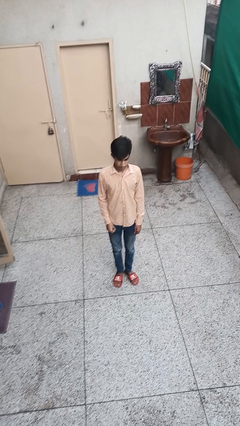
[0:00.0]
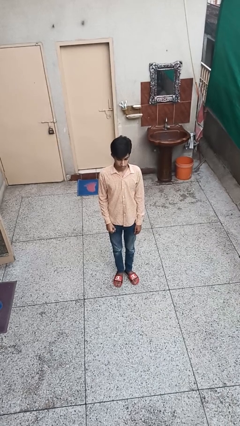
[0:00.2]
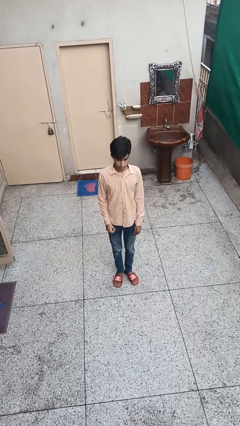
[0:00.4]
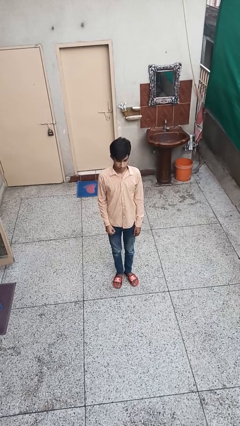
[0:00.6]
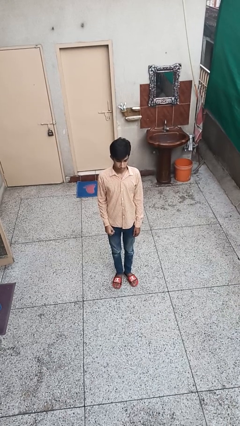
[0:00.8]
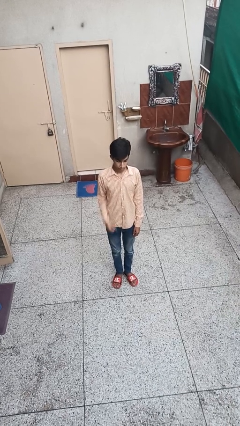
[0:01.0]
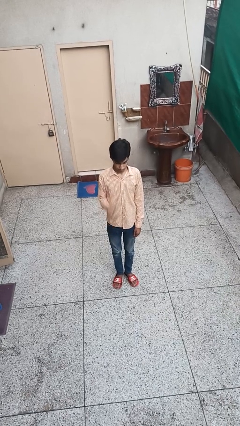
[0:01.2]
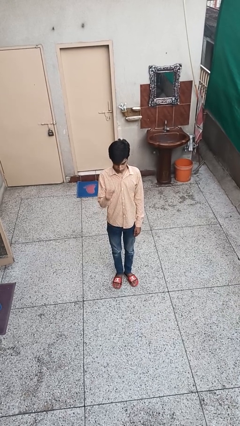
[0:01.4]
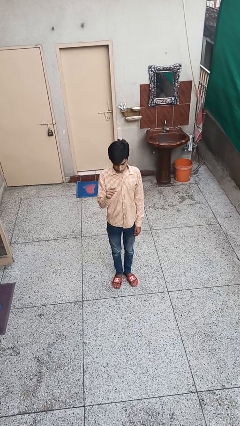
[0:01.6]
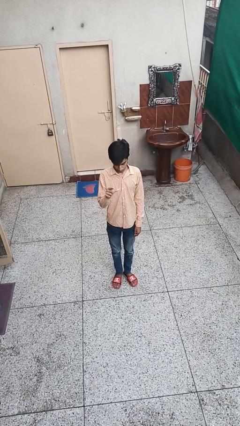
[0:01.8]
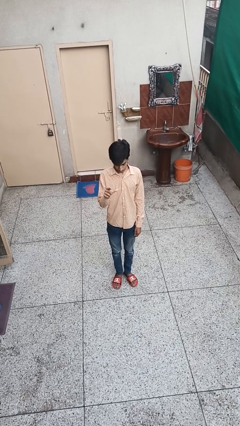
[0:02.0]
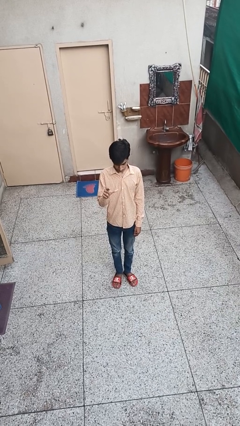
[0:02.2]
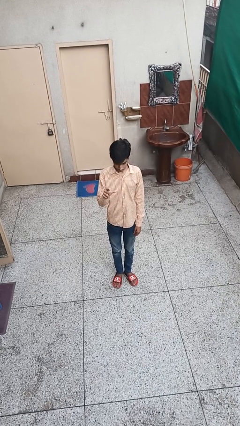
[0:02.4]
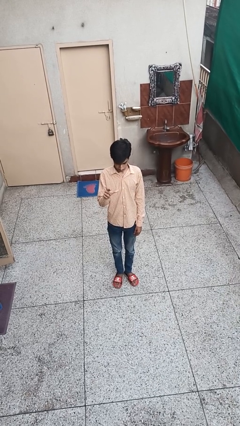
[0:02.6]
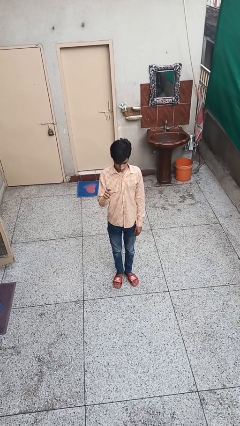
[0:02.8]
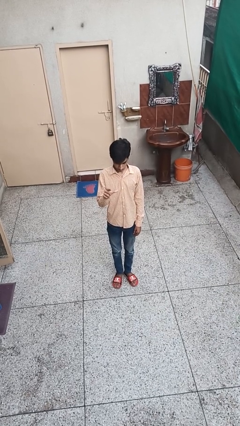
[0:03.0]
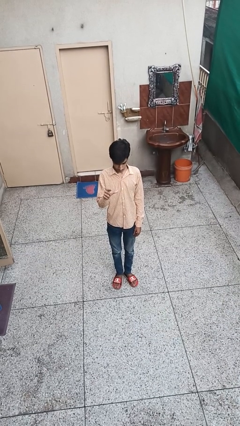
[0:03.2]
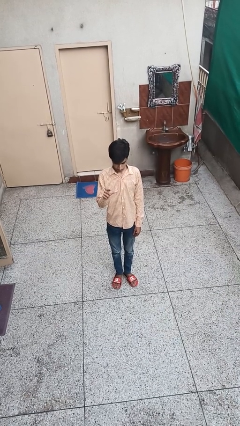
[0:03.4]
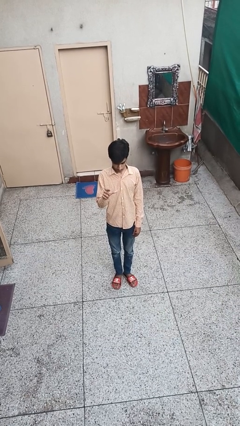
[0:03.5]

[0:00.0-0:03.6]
person gestures zoom in

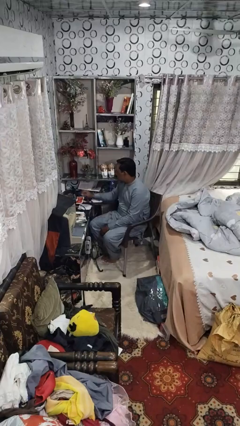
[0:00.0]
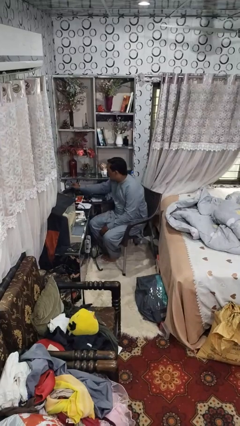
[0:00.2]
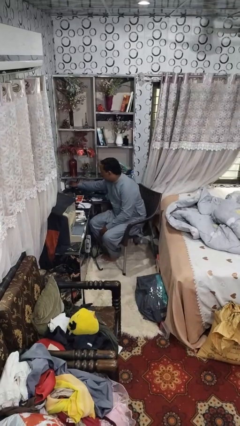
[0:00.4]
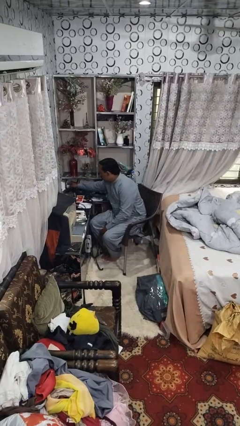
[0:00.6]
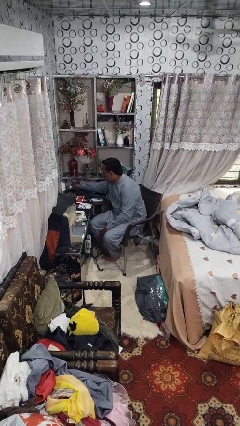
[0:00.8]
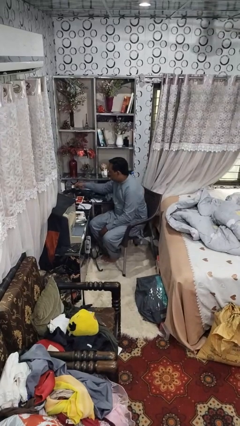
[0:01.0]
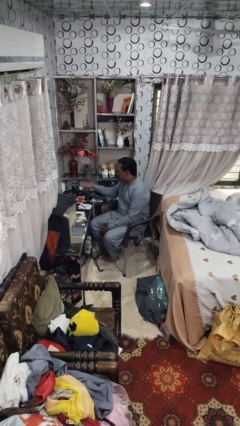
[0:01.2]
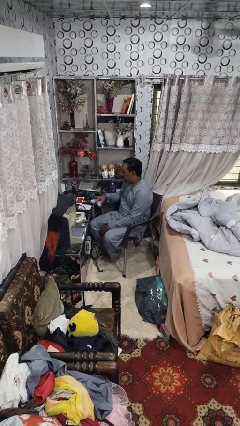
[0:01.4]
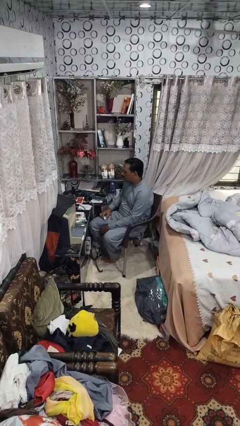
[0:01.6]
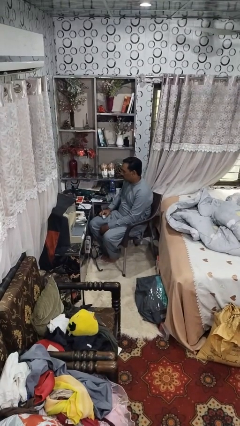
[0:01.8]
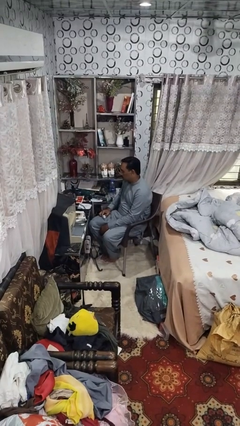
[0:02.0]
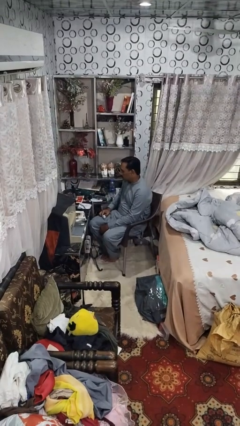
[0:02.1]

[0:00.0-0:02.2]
person unplugs from electrical socket

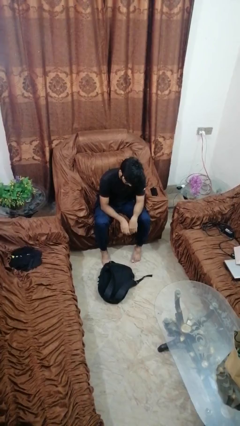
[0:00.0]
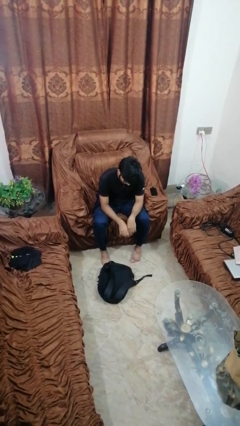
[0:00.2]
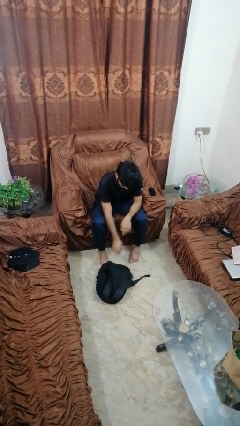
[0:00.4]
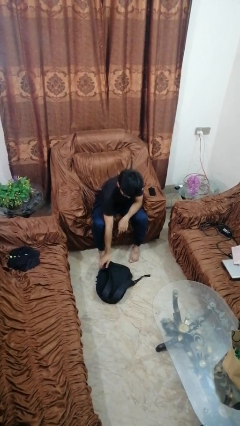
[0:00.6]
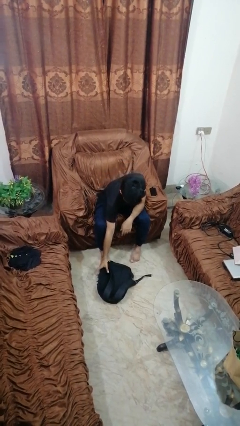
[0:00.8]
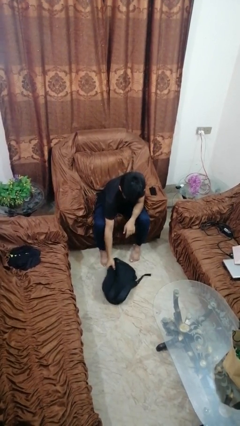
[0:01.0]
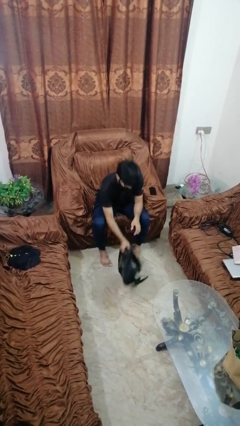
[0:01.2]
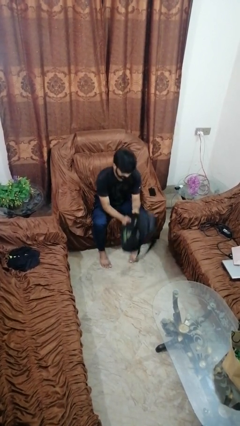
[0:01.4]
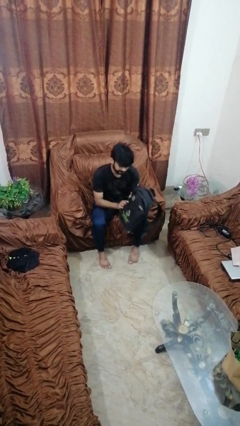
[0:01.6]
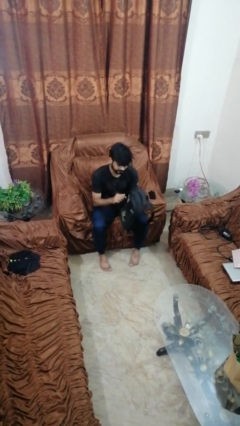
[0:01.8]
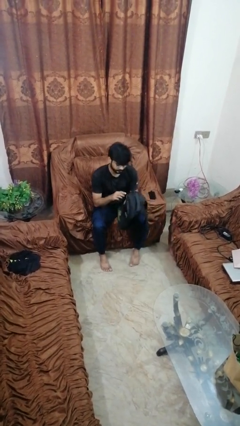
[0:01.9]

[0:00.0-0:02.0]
person picks up object from floor

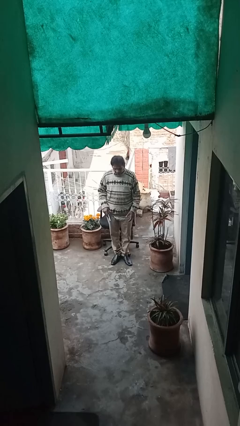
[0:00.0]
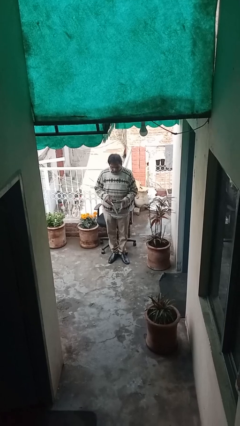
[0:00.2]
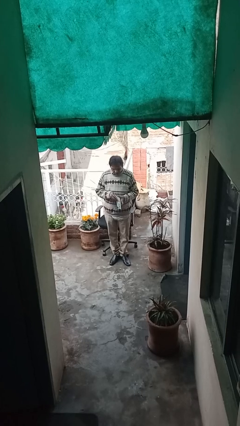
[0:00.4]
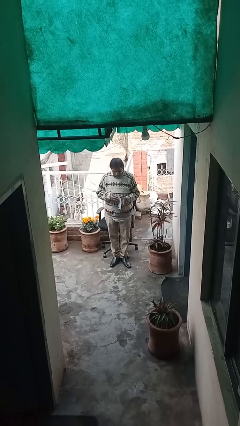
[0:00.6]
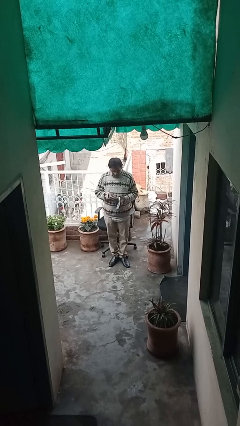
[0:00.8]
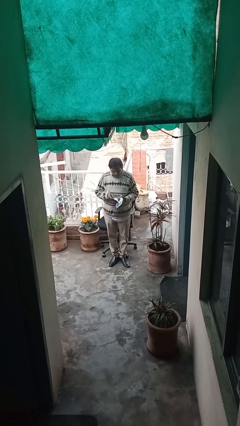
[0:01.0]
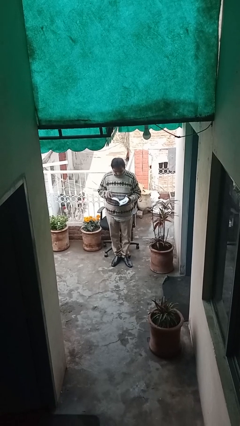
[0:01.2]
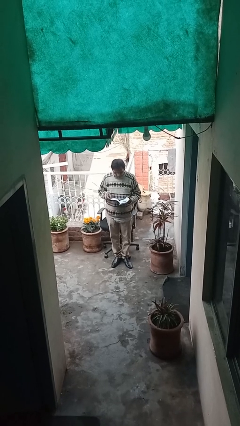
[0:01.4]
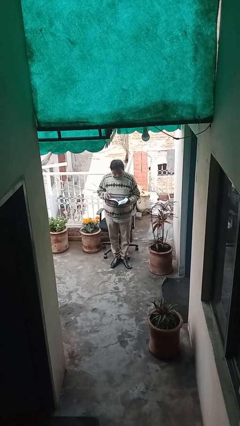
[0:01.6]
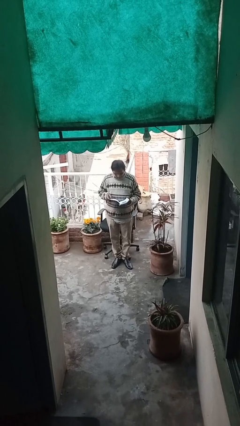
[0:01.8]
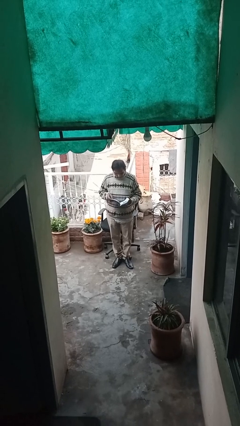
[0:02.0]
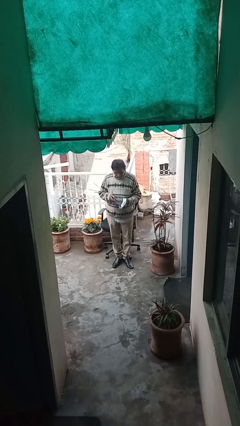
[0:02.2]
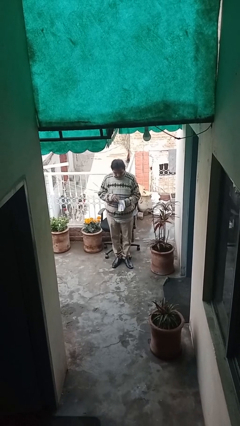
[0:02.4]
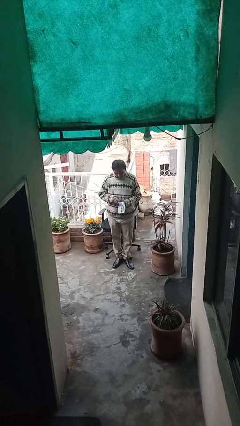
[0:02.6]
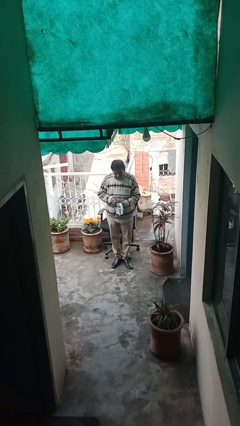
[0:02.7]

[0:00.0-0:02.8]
person reads document

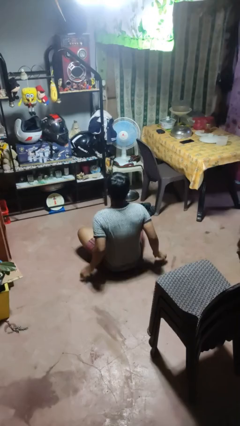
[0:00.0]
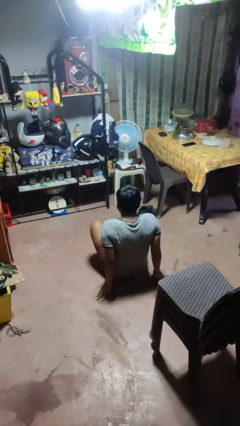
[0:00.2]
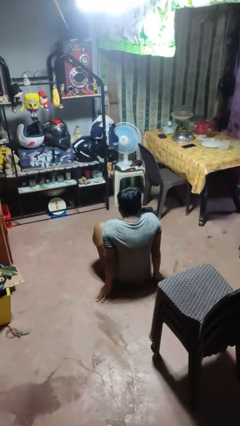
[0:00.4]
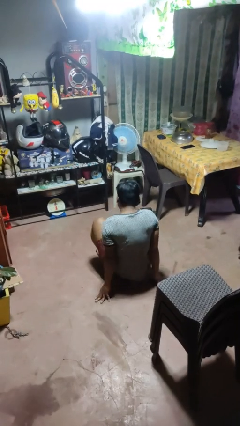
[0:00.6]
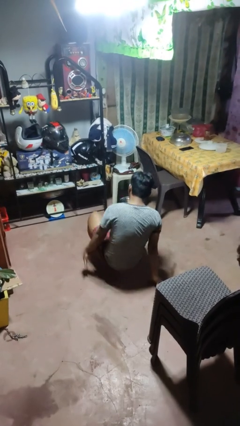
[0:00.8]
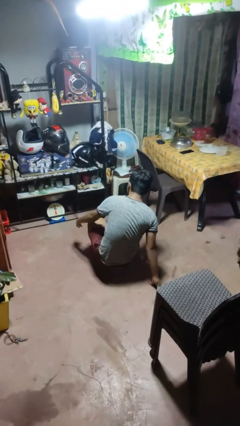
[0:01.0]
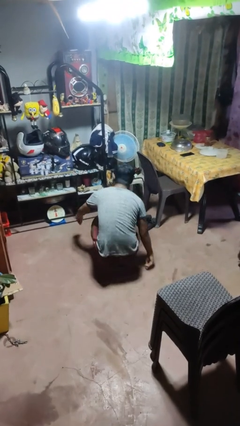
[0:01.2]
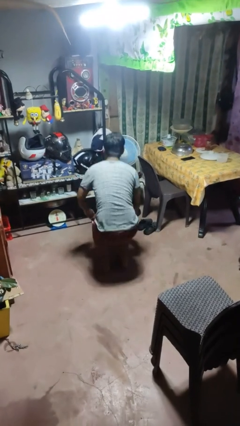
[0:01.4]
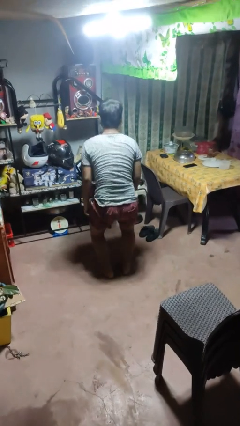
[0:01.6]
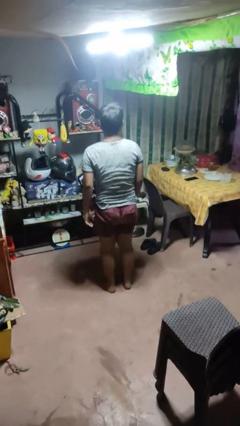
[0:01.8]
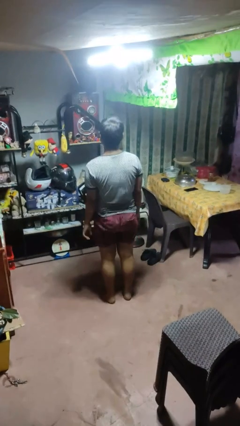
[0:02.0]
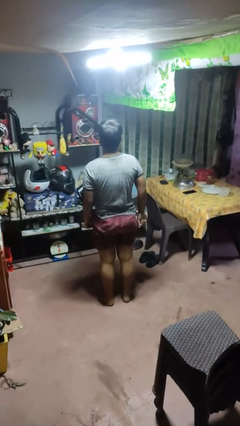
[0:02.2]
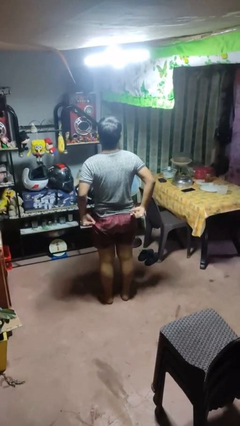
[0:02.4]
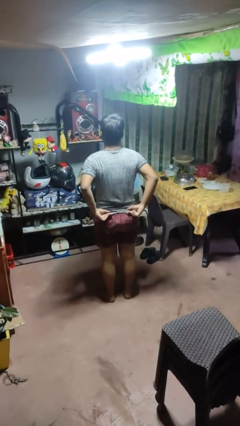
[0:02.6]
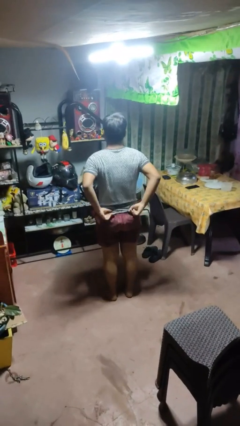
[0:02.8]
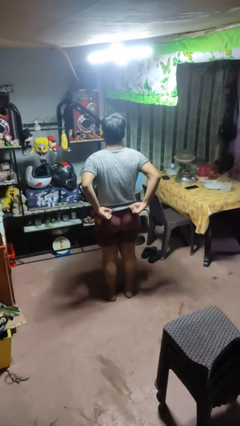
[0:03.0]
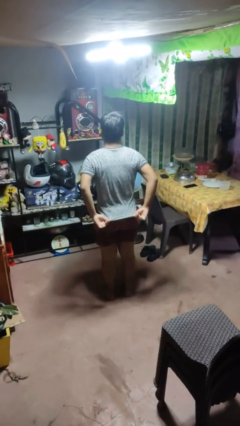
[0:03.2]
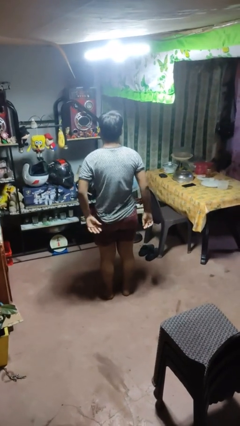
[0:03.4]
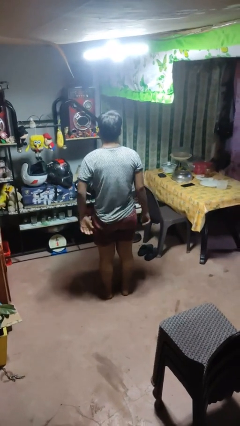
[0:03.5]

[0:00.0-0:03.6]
person stands up from floor

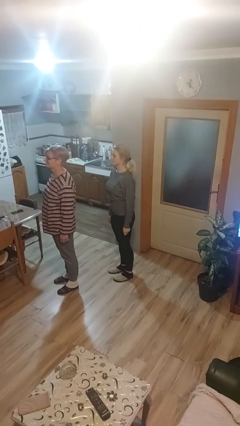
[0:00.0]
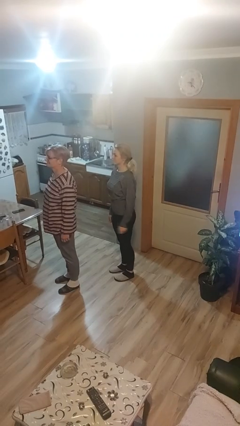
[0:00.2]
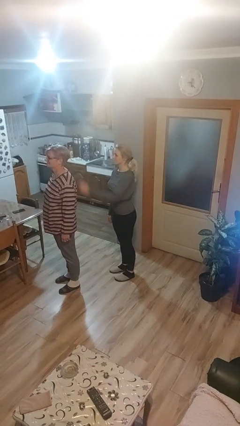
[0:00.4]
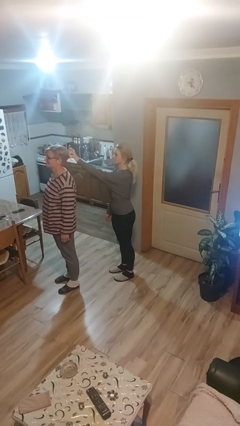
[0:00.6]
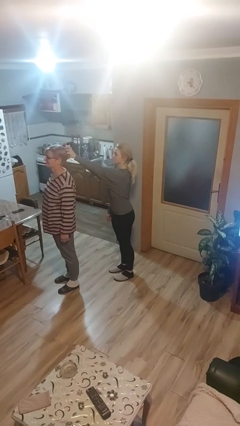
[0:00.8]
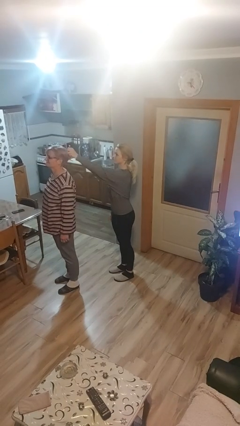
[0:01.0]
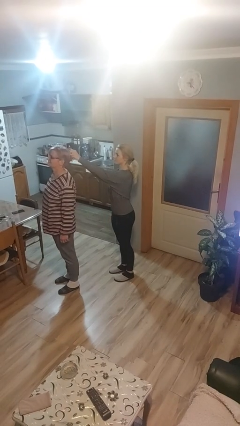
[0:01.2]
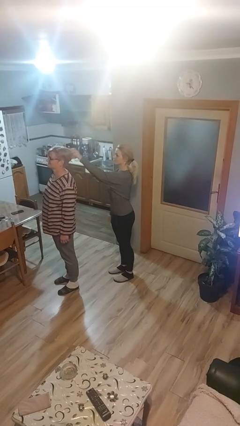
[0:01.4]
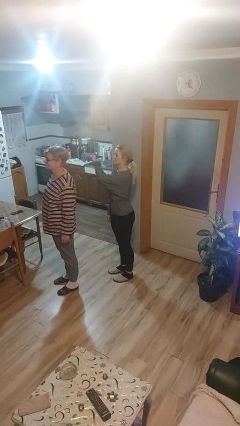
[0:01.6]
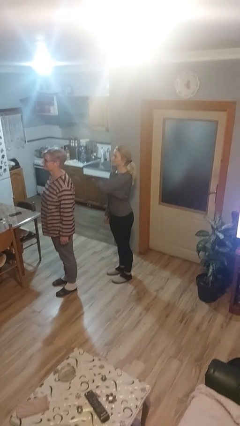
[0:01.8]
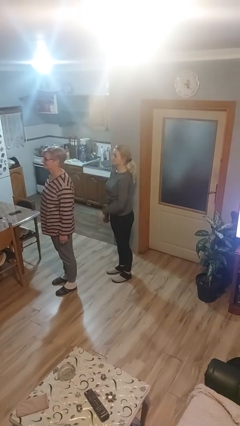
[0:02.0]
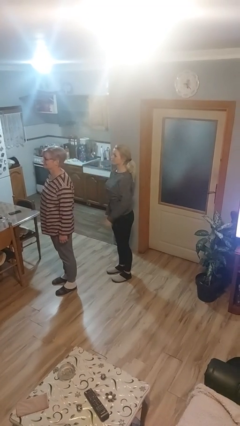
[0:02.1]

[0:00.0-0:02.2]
person grabs person by hair

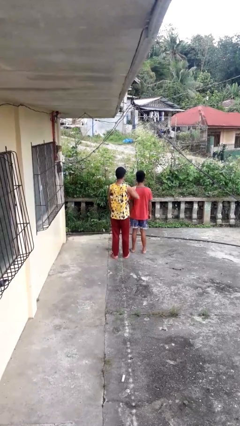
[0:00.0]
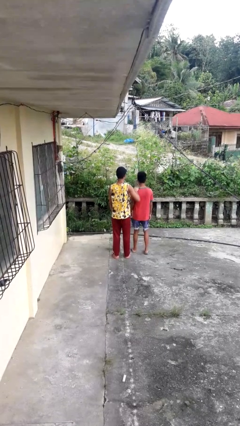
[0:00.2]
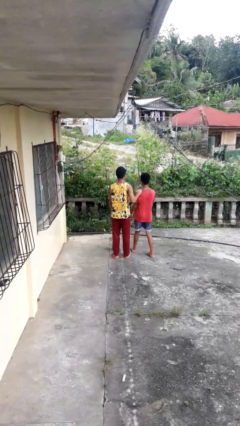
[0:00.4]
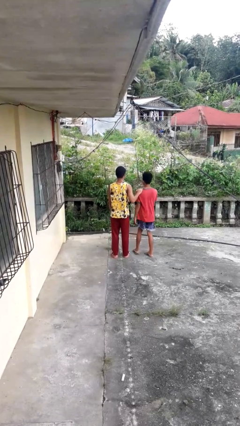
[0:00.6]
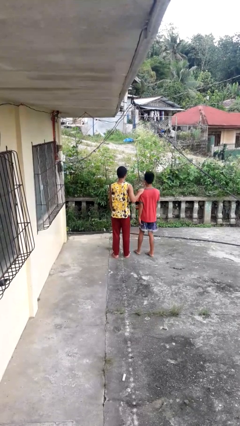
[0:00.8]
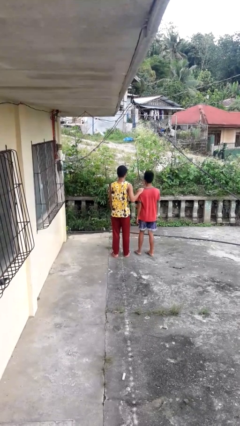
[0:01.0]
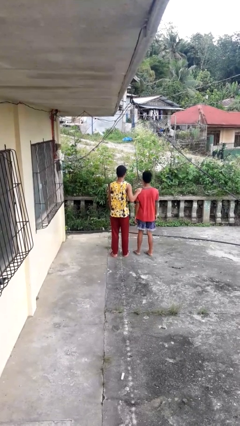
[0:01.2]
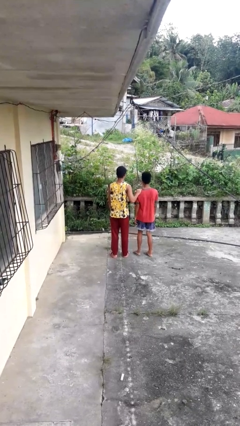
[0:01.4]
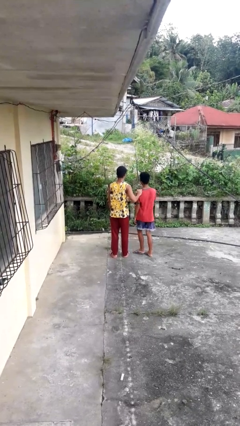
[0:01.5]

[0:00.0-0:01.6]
person grabs person by shoulder
